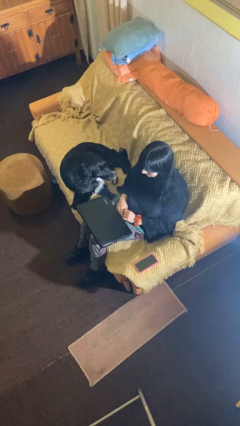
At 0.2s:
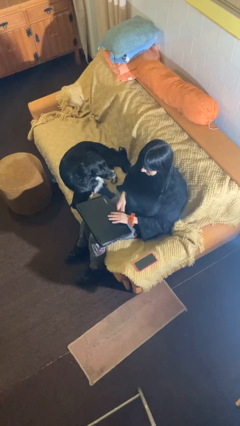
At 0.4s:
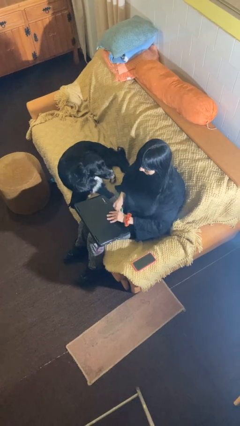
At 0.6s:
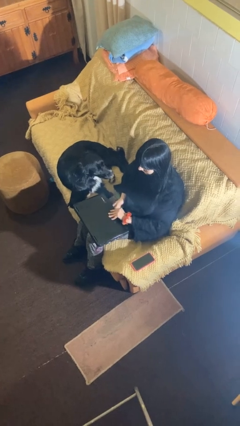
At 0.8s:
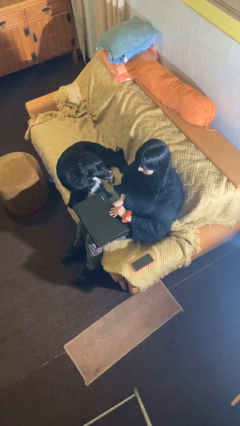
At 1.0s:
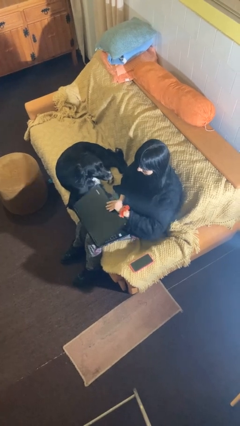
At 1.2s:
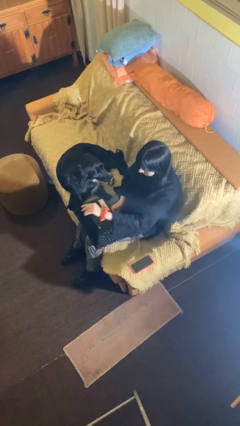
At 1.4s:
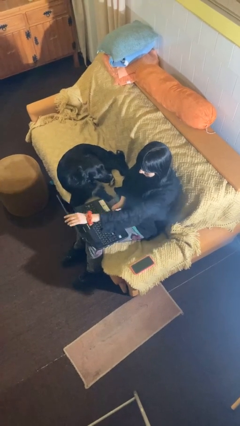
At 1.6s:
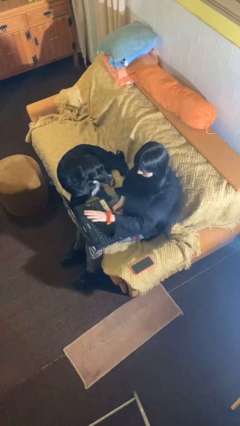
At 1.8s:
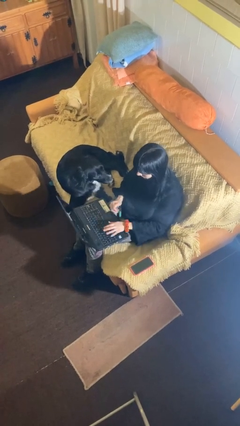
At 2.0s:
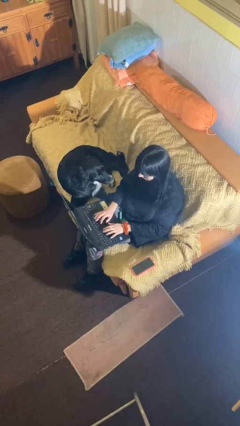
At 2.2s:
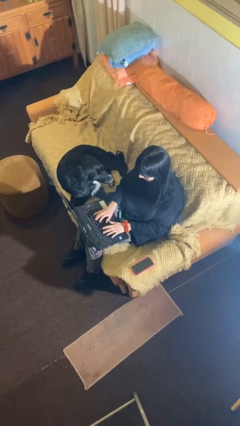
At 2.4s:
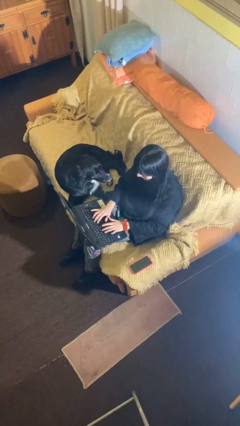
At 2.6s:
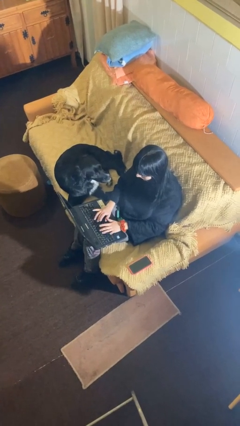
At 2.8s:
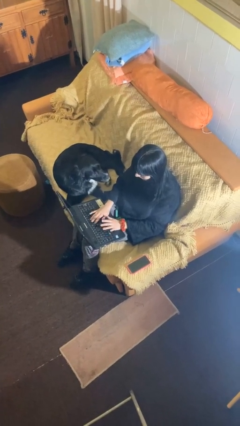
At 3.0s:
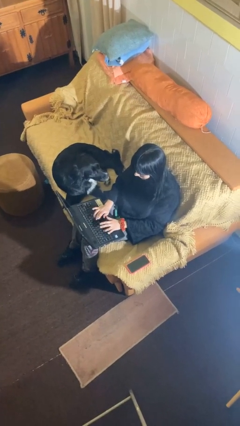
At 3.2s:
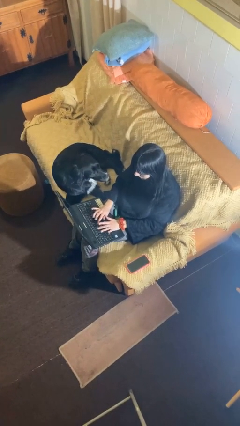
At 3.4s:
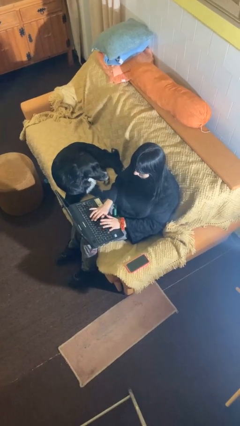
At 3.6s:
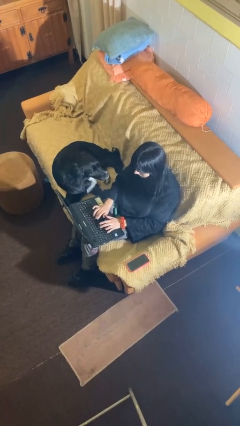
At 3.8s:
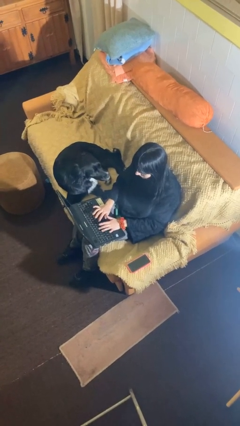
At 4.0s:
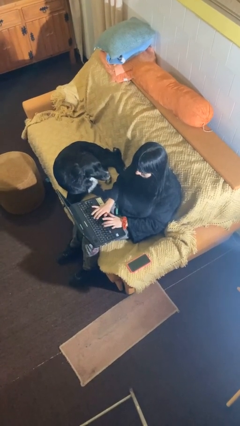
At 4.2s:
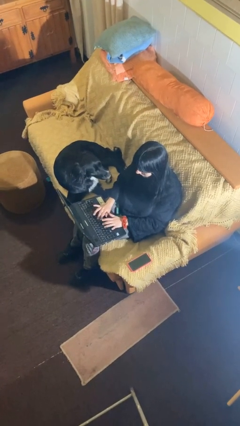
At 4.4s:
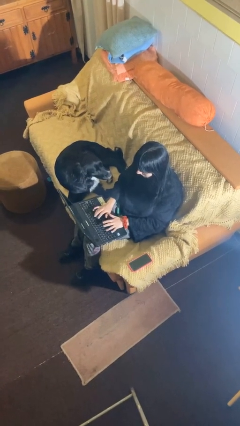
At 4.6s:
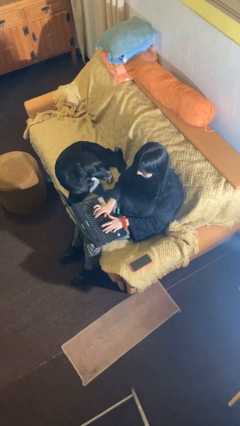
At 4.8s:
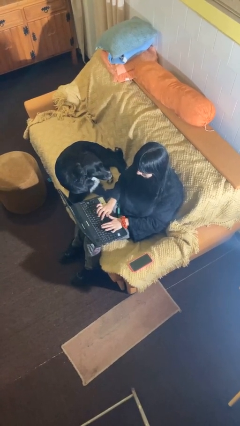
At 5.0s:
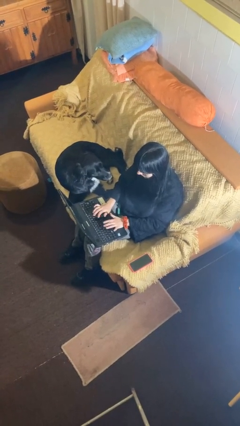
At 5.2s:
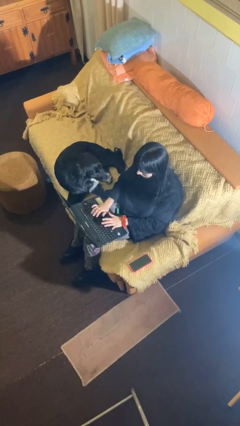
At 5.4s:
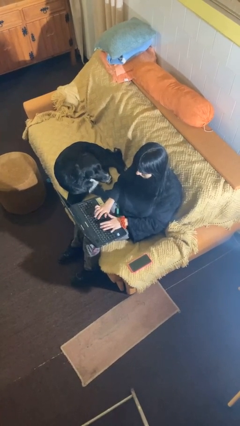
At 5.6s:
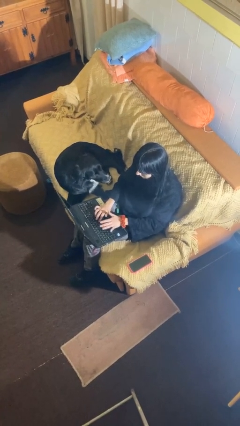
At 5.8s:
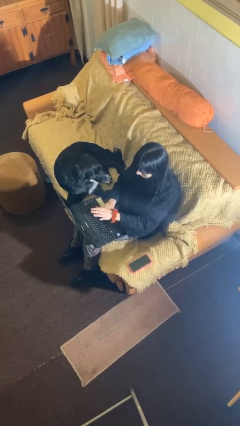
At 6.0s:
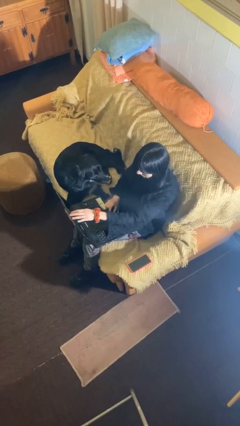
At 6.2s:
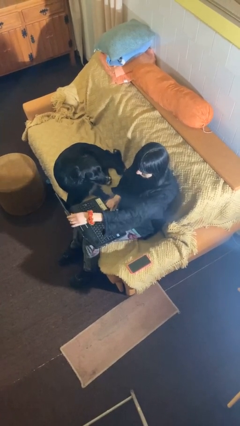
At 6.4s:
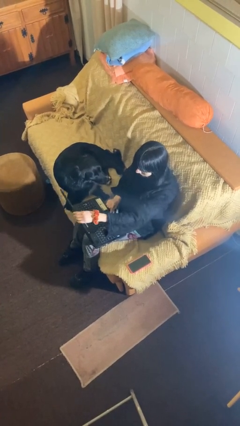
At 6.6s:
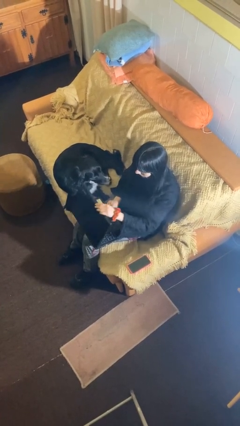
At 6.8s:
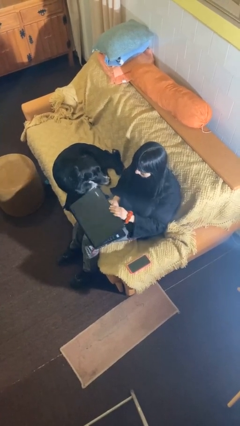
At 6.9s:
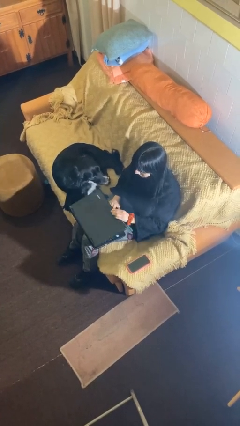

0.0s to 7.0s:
person interacts with laptop

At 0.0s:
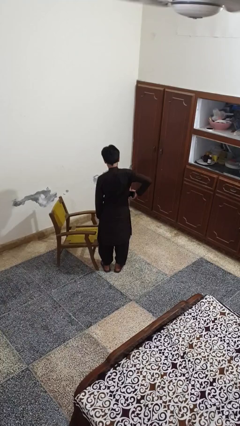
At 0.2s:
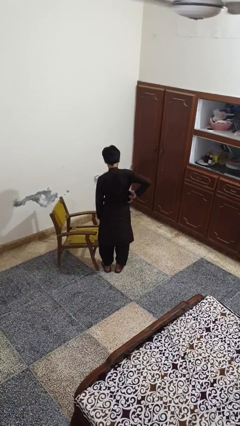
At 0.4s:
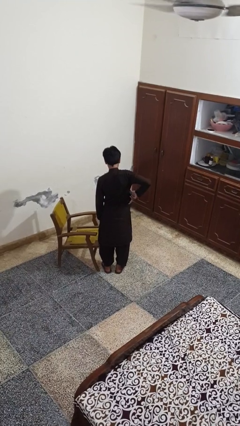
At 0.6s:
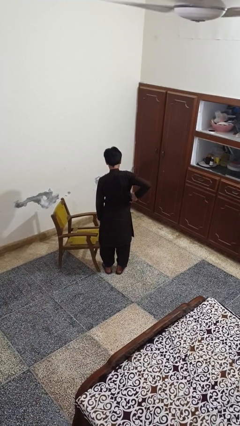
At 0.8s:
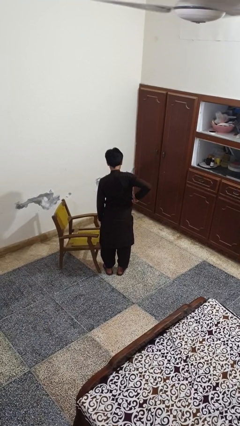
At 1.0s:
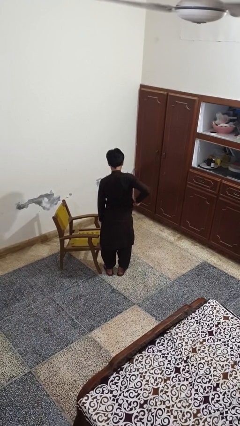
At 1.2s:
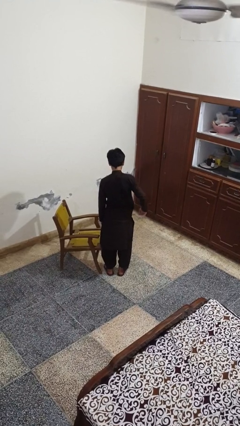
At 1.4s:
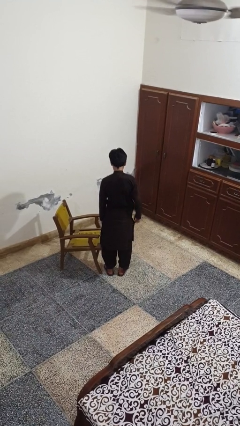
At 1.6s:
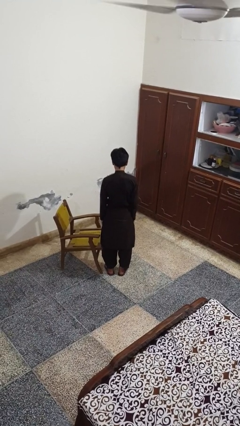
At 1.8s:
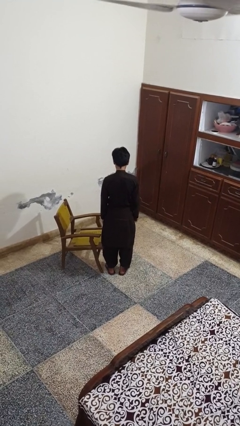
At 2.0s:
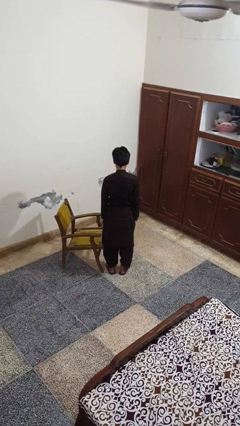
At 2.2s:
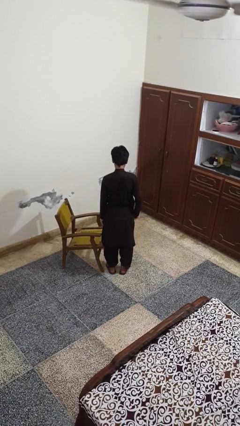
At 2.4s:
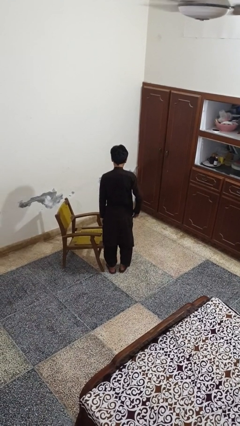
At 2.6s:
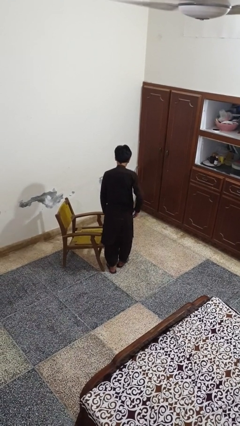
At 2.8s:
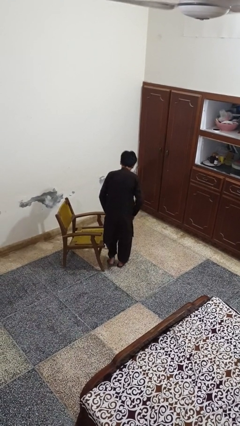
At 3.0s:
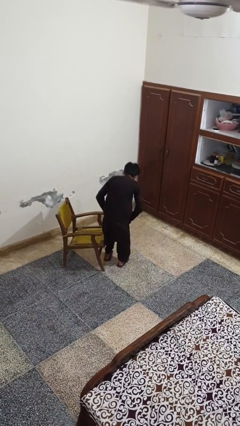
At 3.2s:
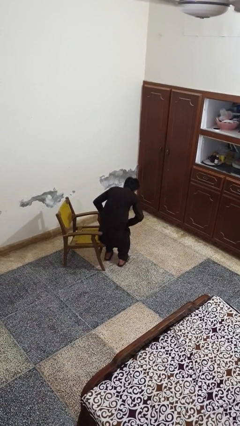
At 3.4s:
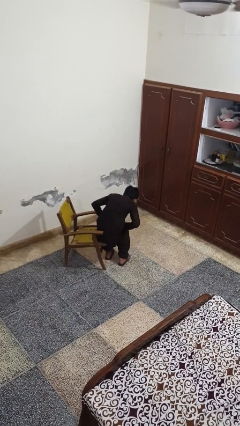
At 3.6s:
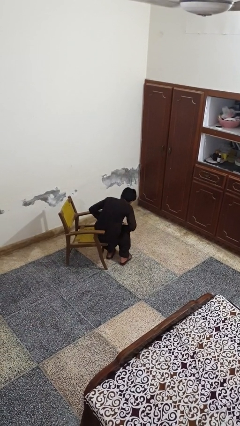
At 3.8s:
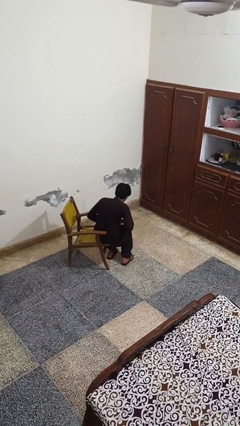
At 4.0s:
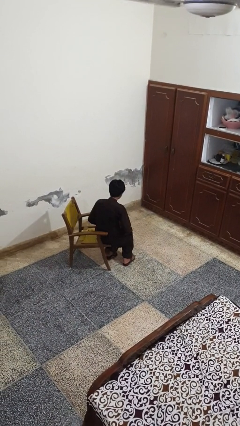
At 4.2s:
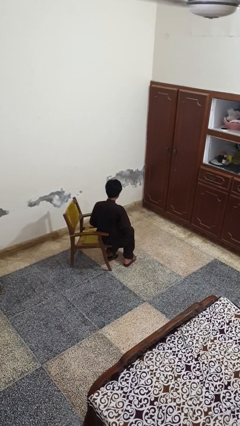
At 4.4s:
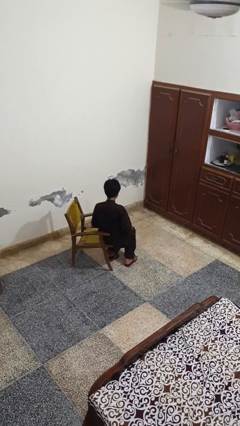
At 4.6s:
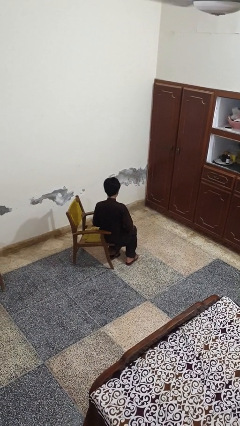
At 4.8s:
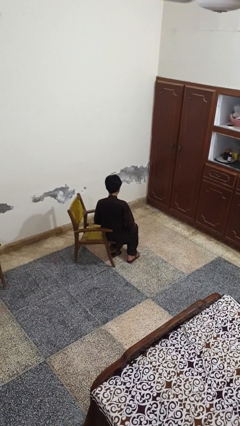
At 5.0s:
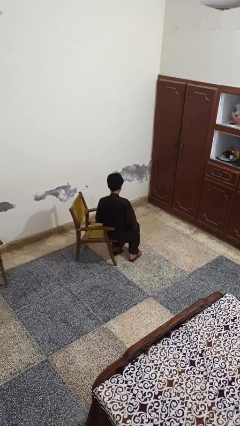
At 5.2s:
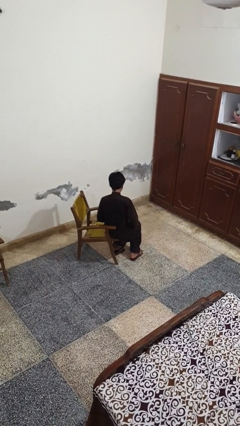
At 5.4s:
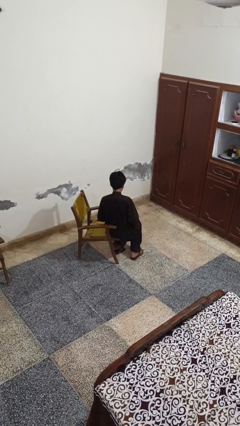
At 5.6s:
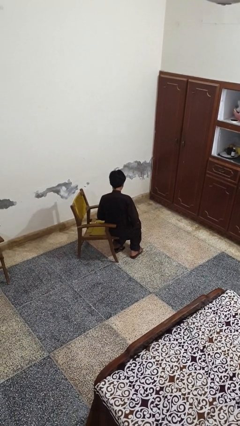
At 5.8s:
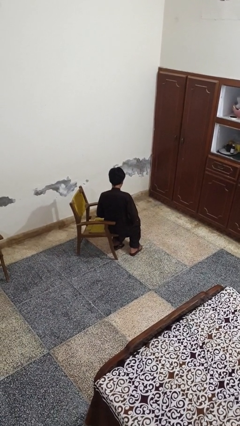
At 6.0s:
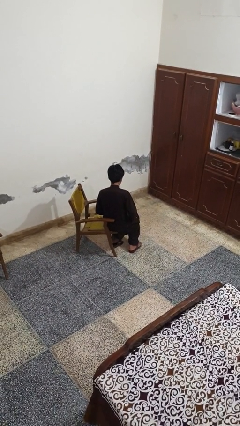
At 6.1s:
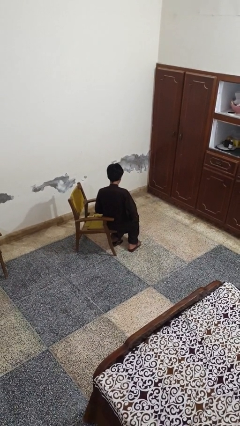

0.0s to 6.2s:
person puts phone into pocket

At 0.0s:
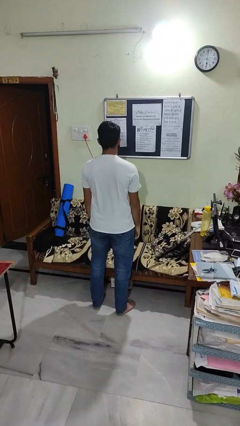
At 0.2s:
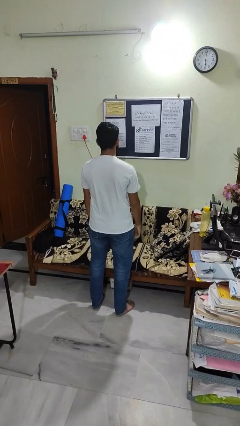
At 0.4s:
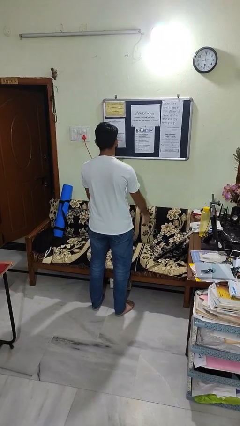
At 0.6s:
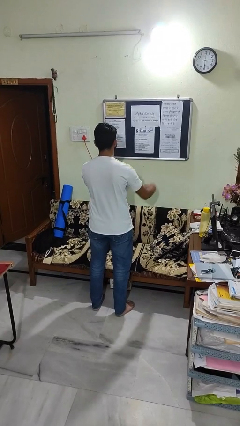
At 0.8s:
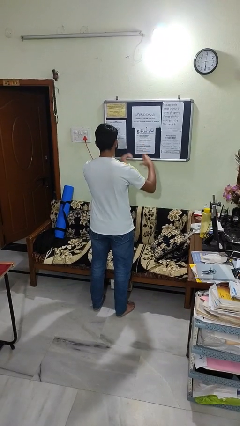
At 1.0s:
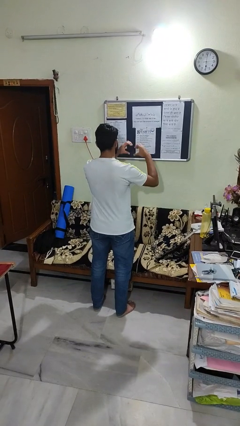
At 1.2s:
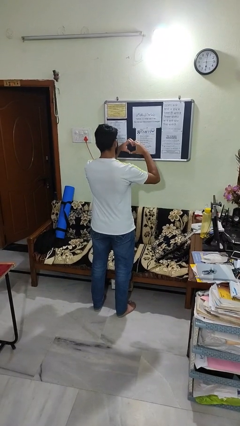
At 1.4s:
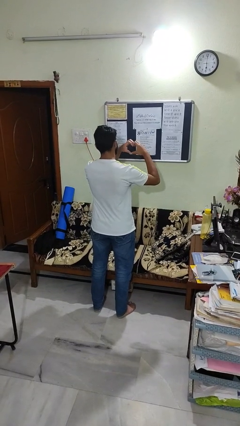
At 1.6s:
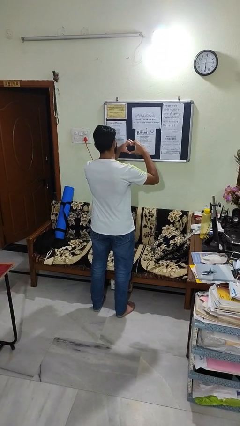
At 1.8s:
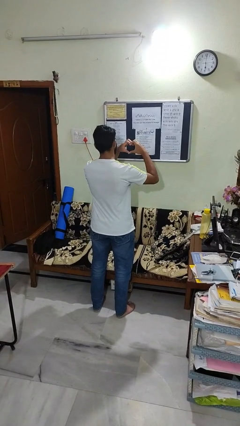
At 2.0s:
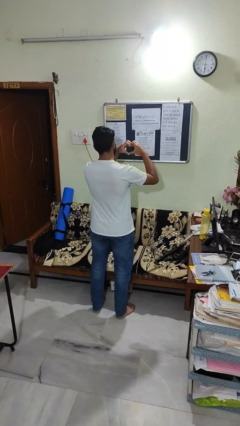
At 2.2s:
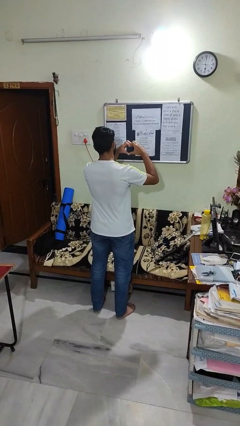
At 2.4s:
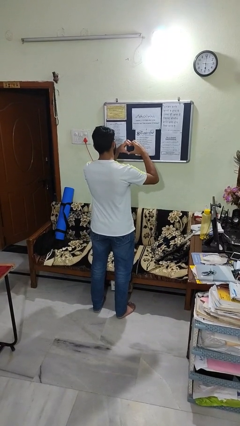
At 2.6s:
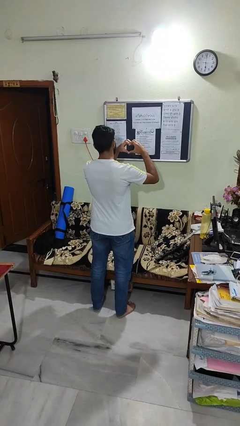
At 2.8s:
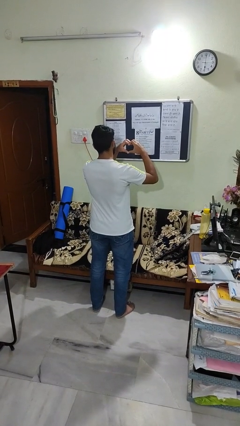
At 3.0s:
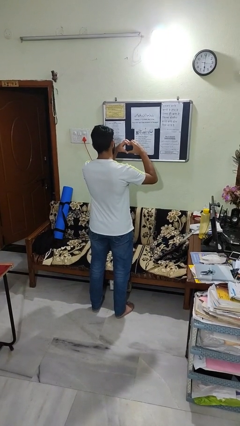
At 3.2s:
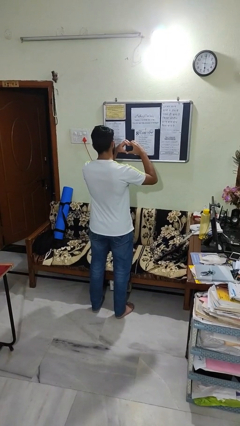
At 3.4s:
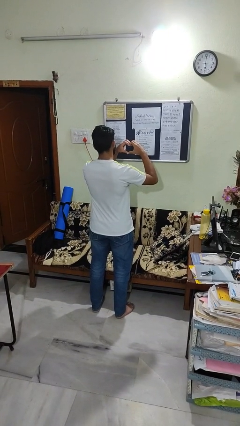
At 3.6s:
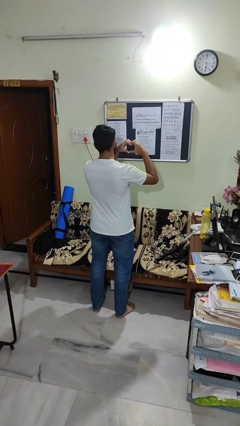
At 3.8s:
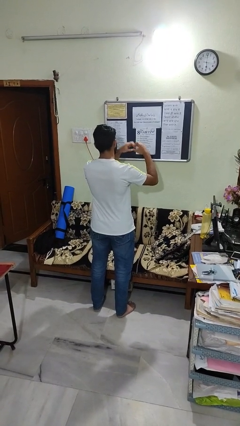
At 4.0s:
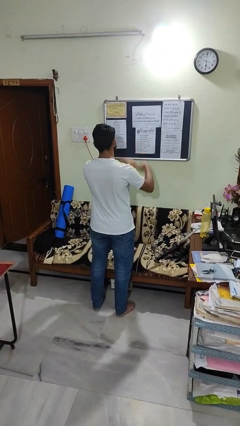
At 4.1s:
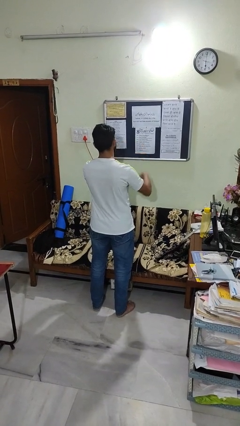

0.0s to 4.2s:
person gestures heart

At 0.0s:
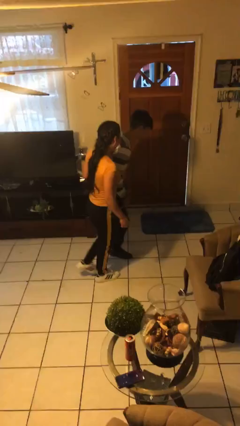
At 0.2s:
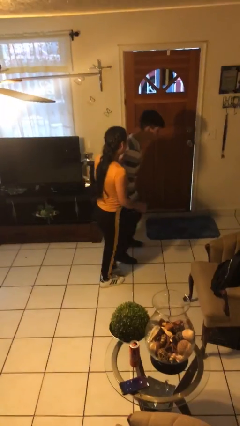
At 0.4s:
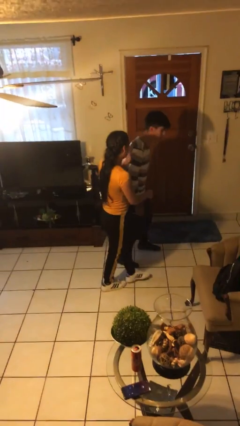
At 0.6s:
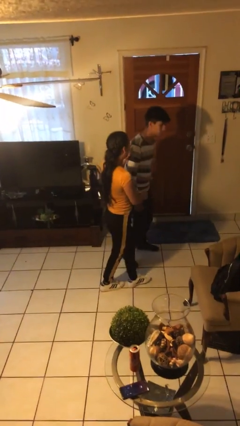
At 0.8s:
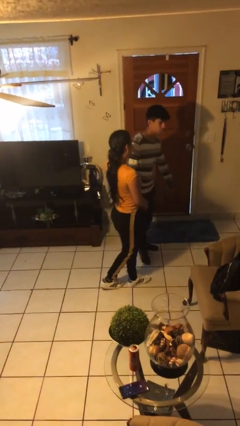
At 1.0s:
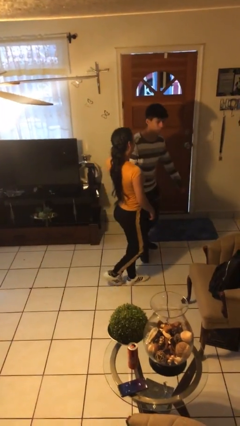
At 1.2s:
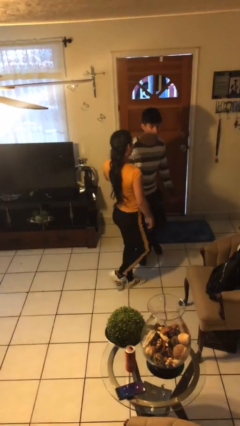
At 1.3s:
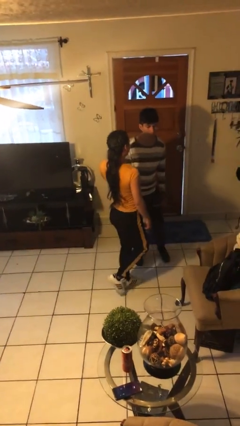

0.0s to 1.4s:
person bumps into person
